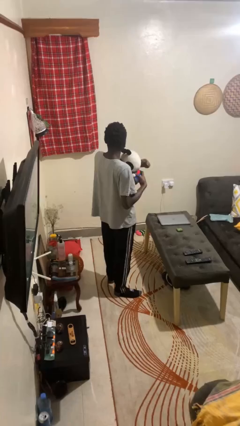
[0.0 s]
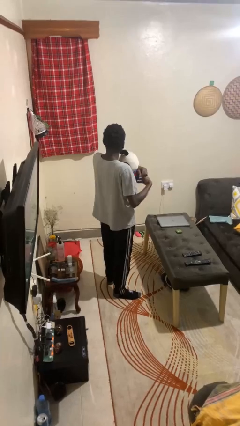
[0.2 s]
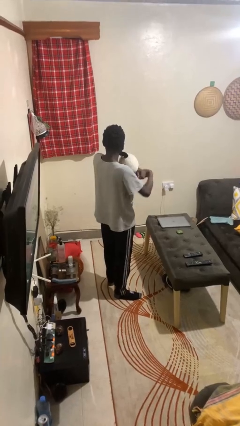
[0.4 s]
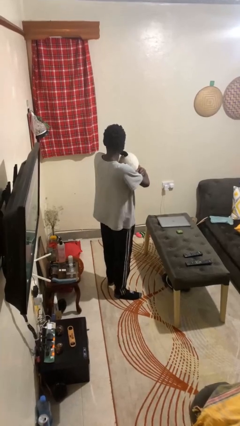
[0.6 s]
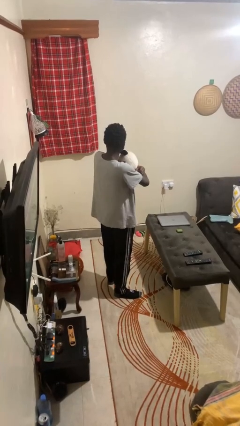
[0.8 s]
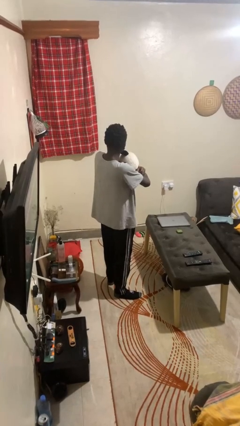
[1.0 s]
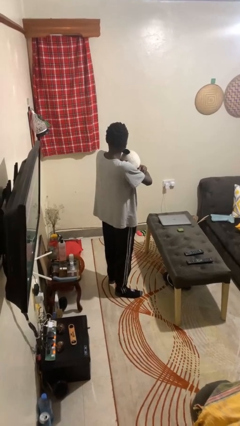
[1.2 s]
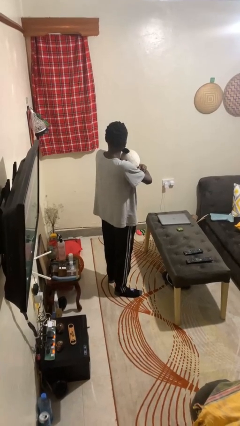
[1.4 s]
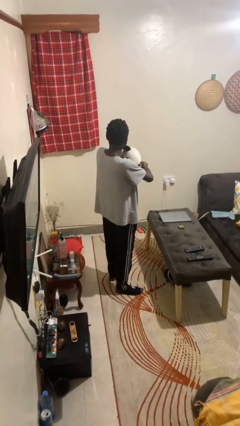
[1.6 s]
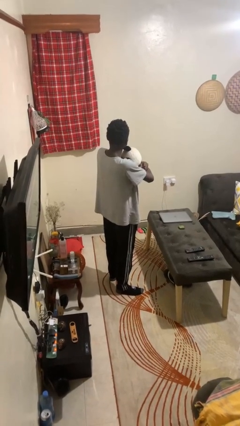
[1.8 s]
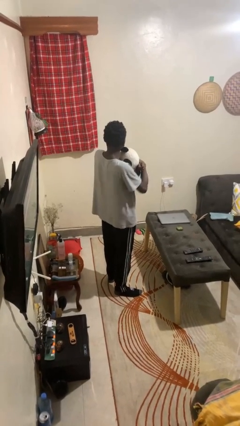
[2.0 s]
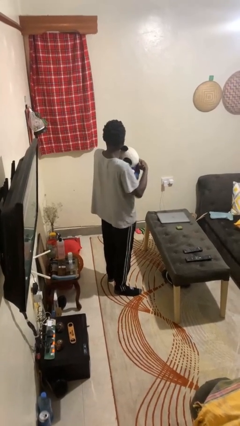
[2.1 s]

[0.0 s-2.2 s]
person hugs stuffed animal

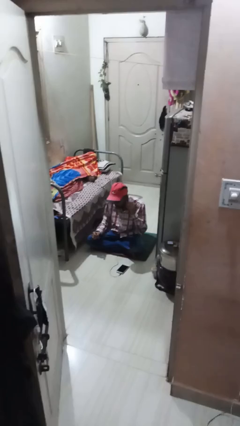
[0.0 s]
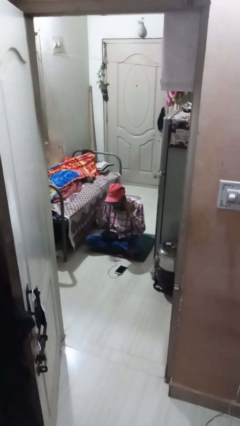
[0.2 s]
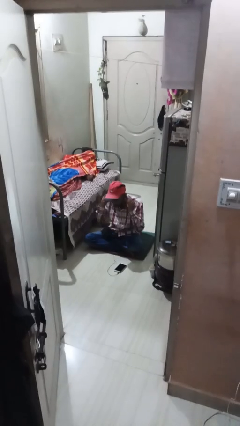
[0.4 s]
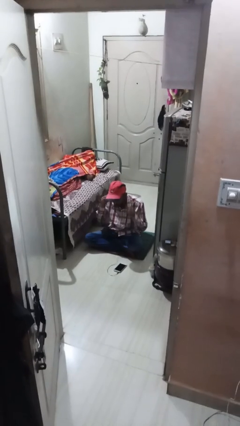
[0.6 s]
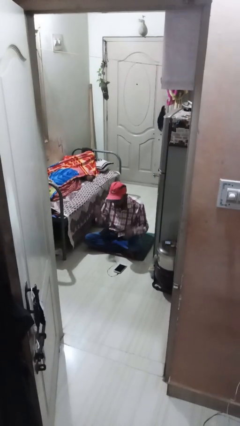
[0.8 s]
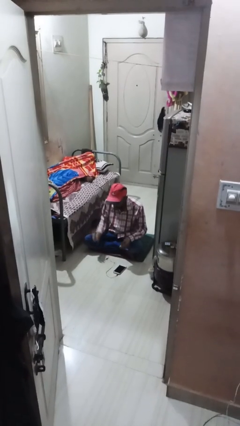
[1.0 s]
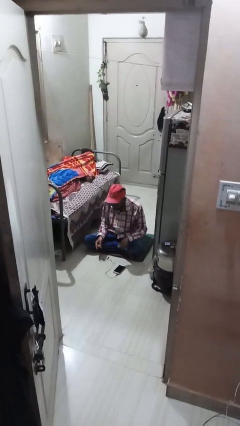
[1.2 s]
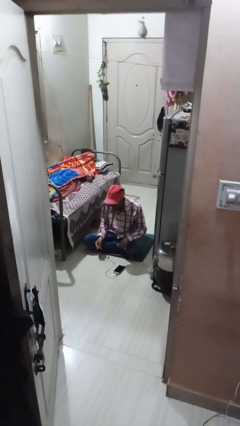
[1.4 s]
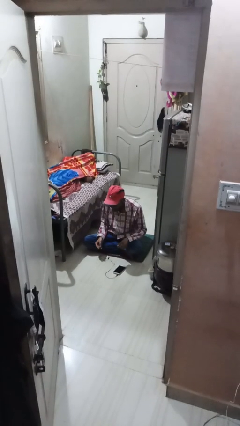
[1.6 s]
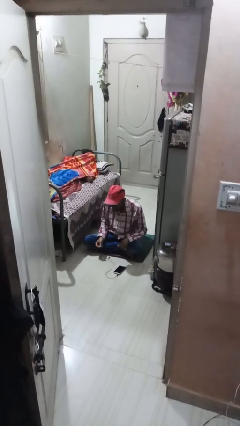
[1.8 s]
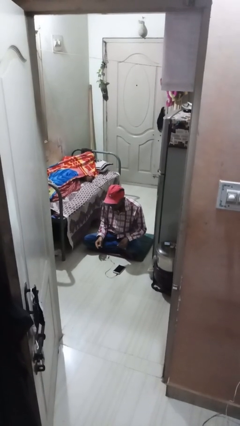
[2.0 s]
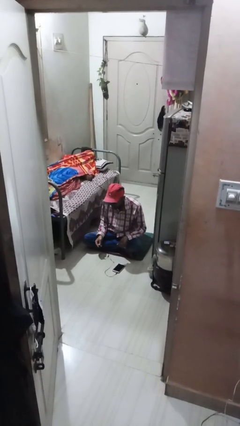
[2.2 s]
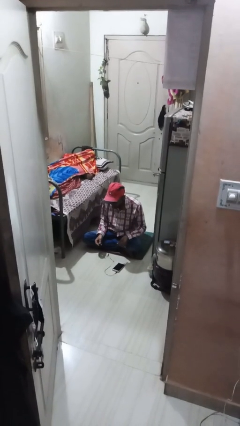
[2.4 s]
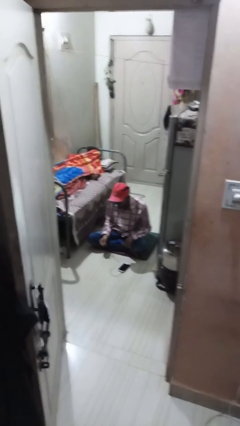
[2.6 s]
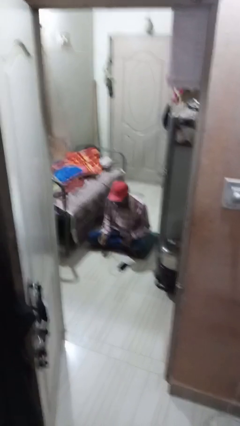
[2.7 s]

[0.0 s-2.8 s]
person takes off headphones

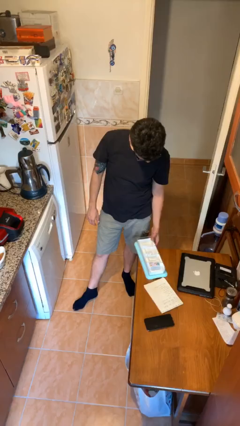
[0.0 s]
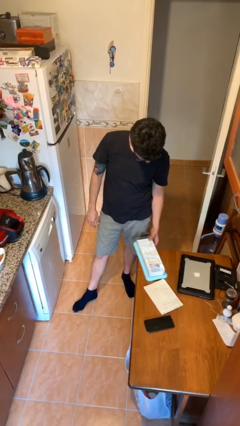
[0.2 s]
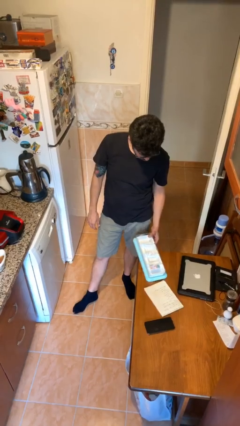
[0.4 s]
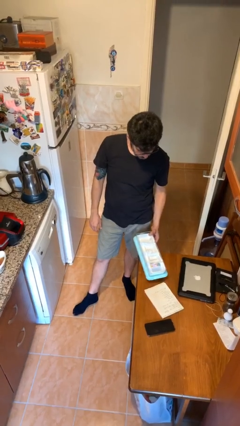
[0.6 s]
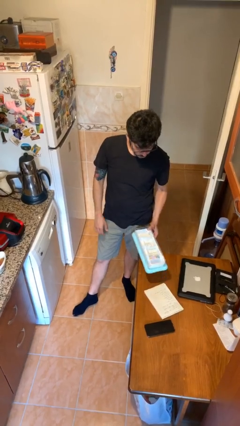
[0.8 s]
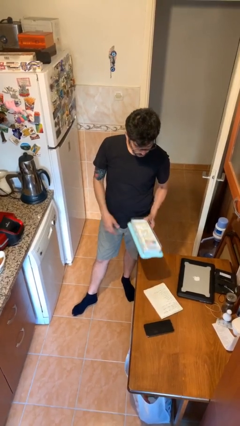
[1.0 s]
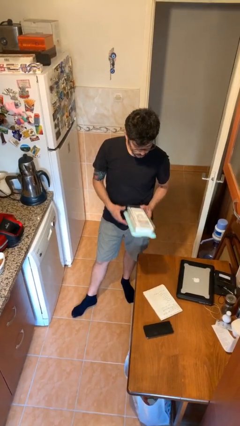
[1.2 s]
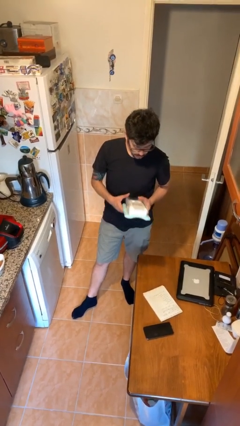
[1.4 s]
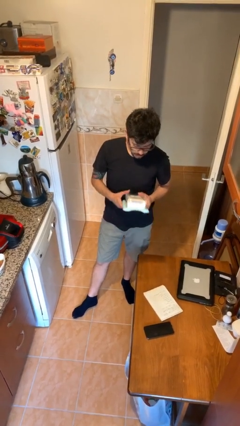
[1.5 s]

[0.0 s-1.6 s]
person picks up object from table

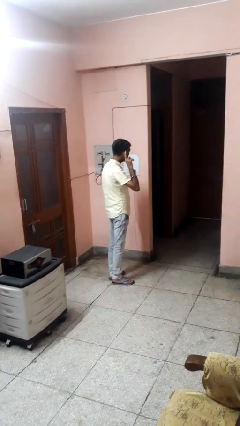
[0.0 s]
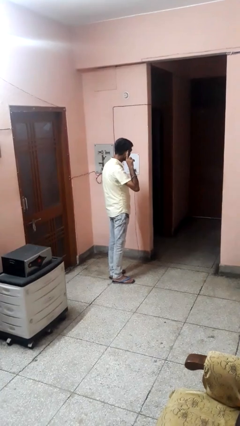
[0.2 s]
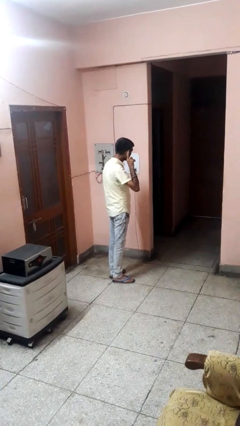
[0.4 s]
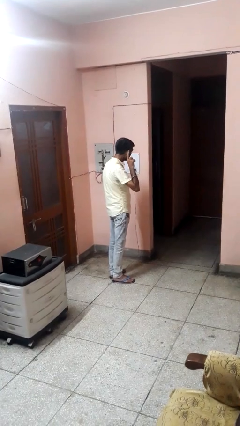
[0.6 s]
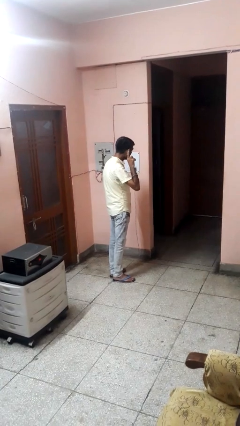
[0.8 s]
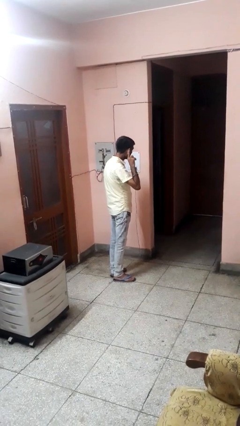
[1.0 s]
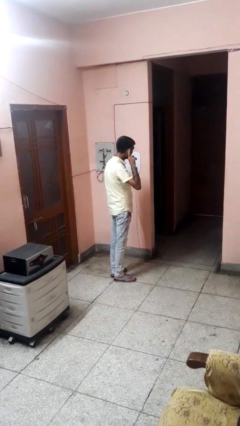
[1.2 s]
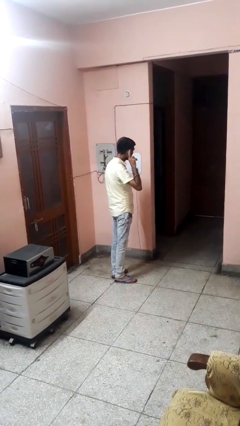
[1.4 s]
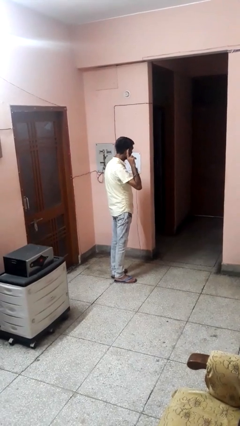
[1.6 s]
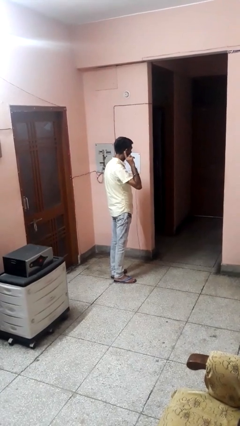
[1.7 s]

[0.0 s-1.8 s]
person gestures listen closely

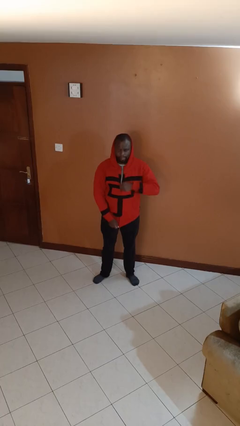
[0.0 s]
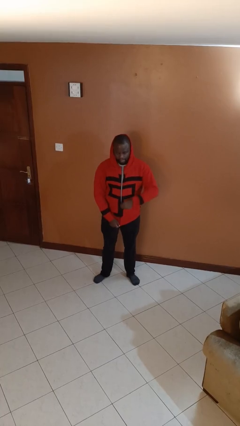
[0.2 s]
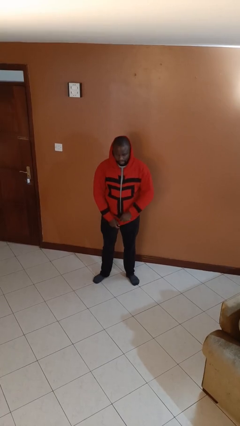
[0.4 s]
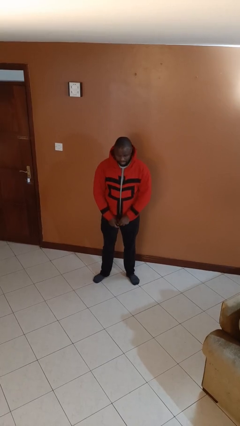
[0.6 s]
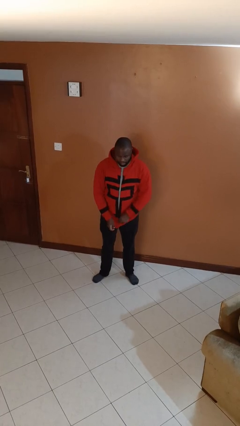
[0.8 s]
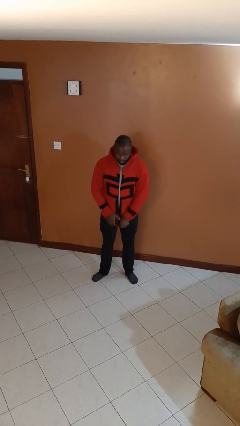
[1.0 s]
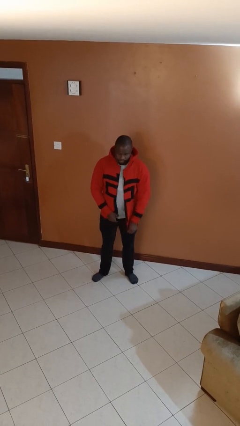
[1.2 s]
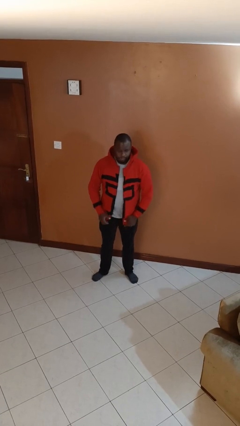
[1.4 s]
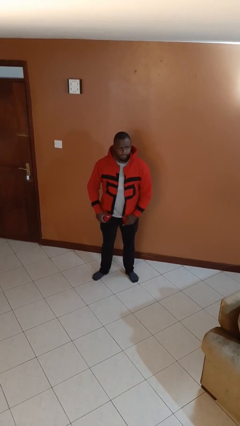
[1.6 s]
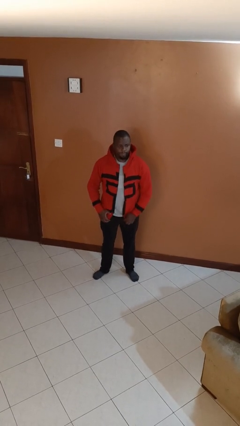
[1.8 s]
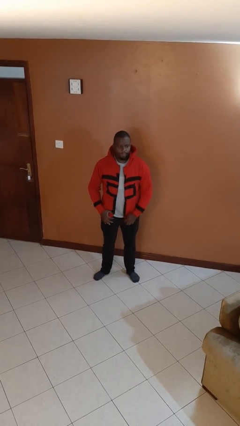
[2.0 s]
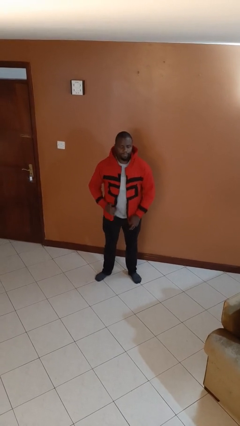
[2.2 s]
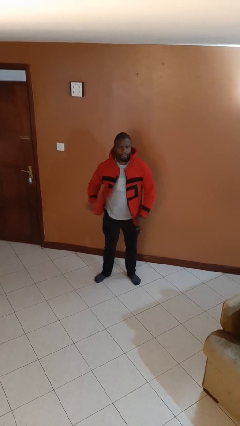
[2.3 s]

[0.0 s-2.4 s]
person unzips jacket

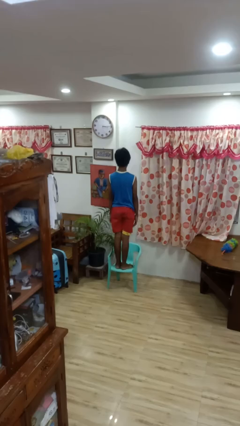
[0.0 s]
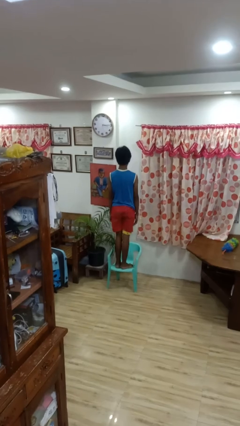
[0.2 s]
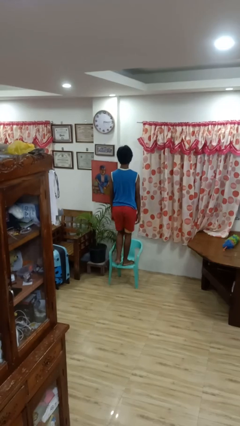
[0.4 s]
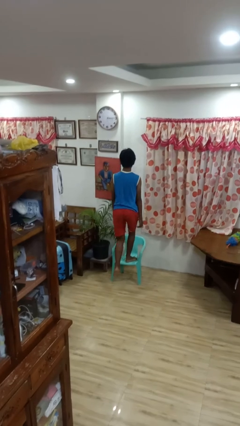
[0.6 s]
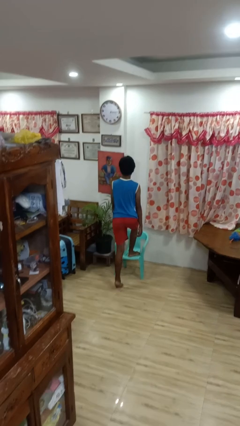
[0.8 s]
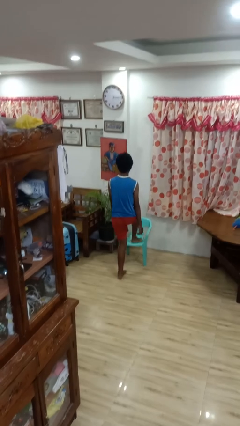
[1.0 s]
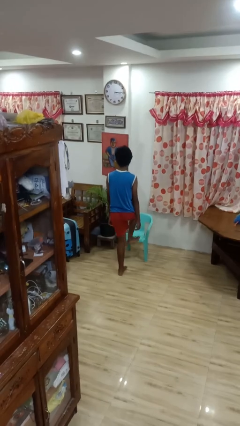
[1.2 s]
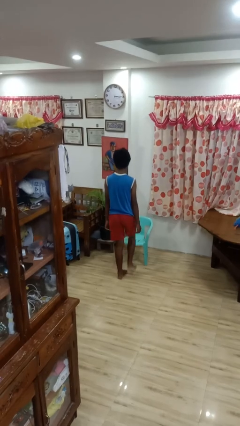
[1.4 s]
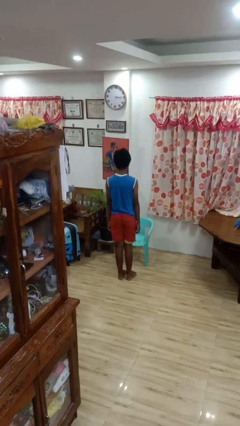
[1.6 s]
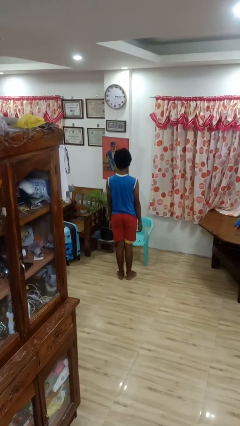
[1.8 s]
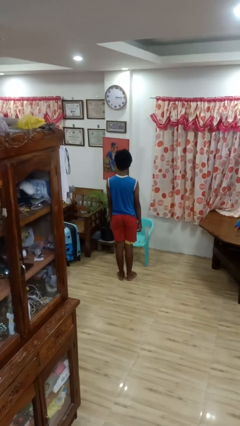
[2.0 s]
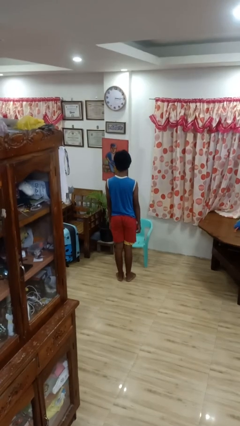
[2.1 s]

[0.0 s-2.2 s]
person climbs off chair

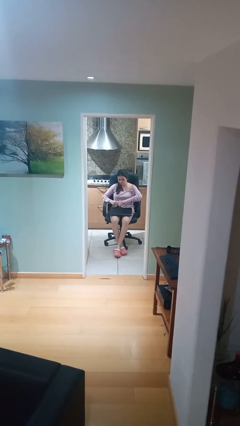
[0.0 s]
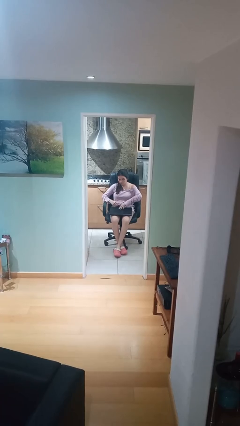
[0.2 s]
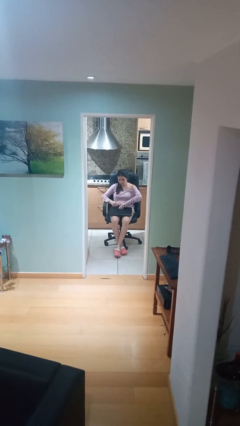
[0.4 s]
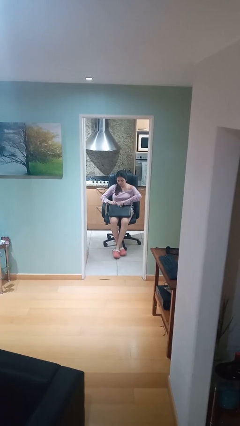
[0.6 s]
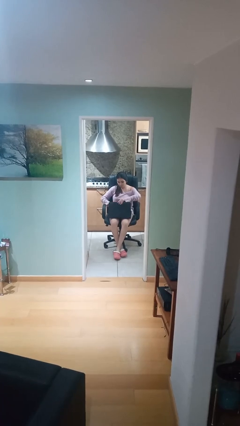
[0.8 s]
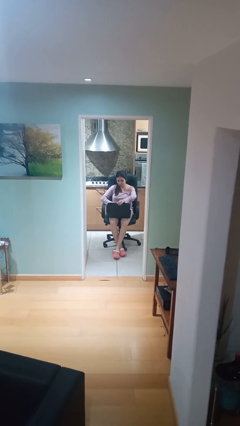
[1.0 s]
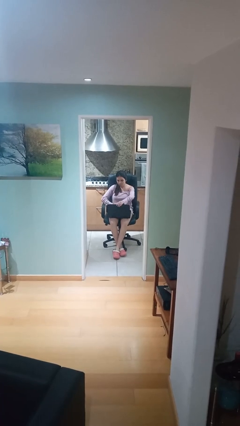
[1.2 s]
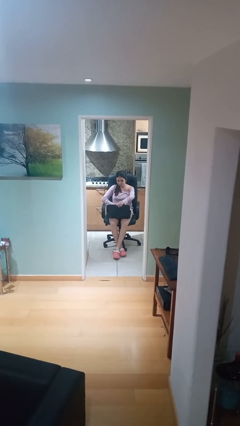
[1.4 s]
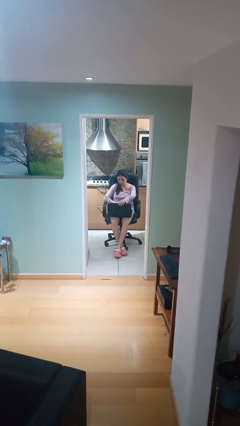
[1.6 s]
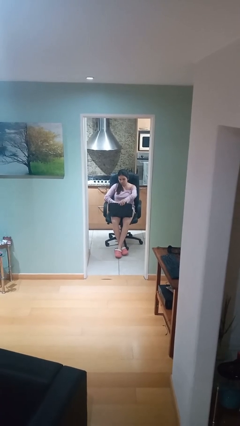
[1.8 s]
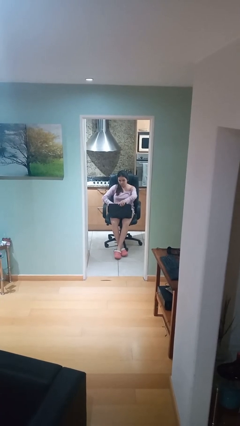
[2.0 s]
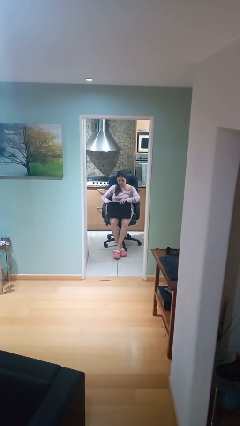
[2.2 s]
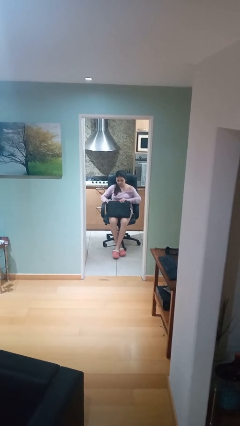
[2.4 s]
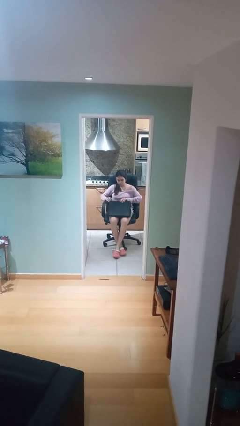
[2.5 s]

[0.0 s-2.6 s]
person interacts with laptop

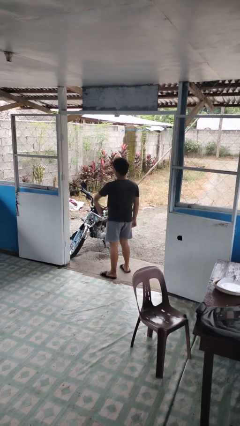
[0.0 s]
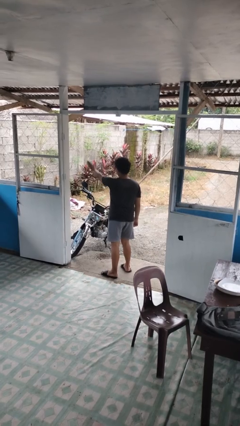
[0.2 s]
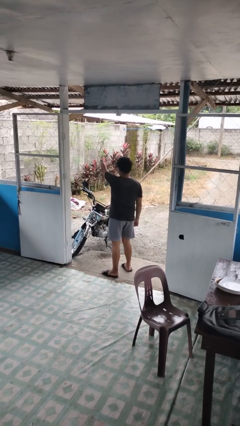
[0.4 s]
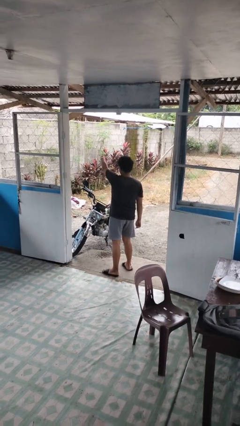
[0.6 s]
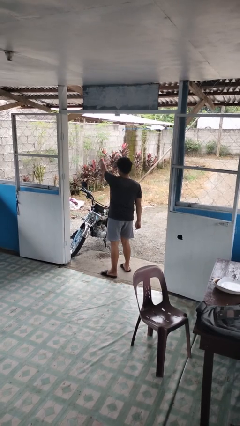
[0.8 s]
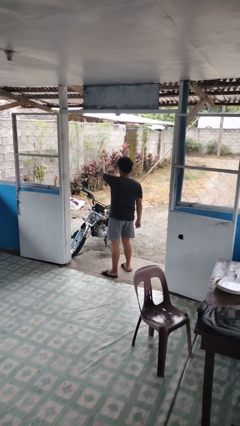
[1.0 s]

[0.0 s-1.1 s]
person gestures come here

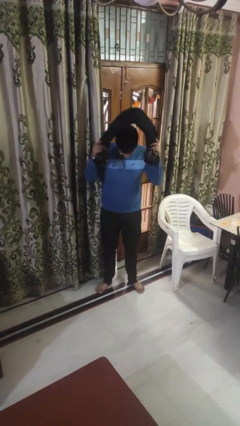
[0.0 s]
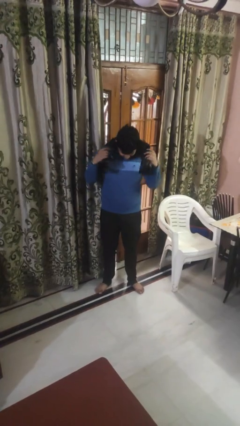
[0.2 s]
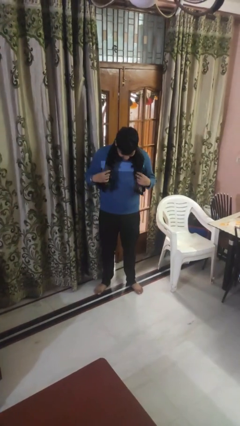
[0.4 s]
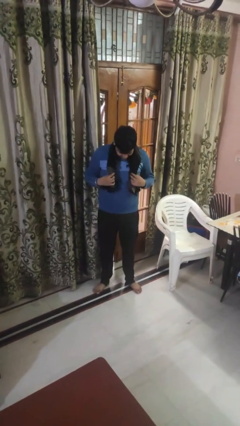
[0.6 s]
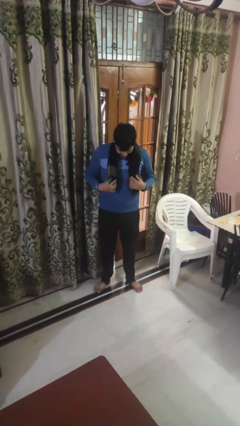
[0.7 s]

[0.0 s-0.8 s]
person puts on scarf
